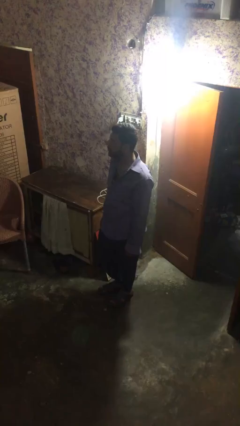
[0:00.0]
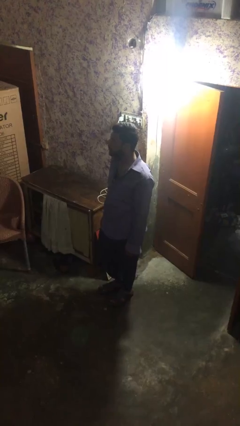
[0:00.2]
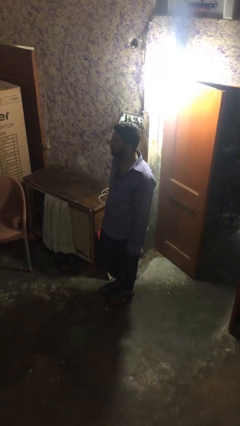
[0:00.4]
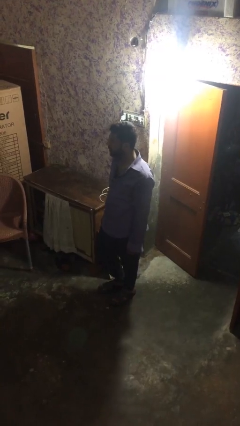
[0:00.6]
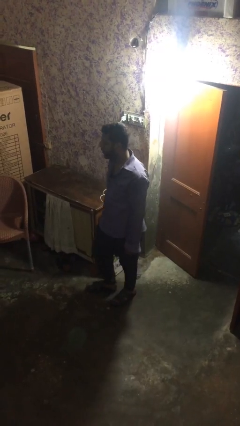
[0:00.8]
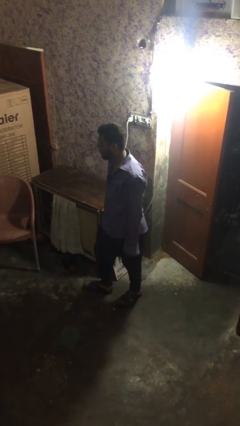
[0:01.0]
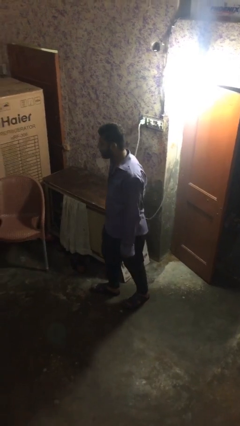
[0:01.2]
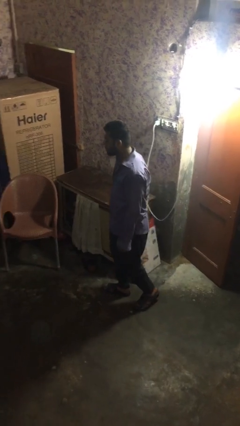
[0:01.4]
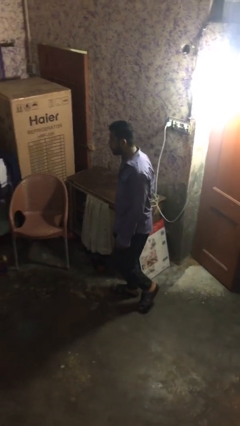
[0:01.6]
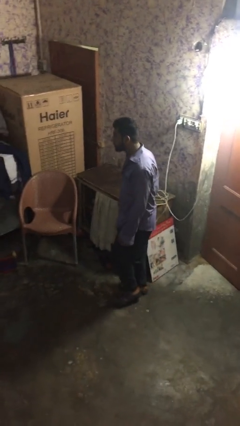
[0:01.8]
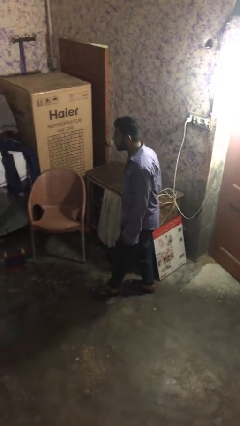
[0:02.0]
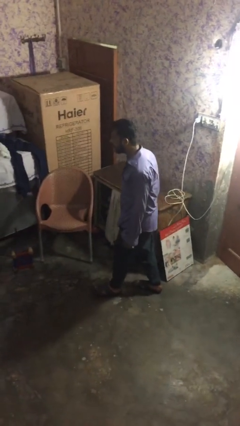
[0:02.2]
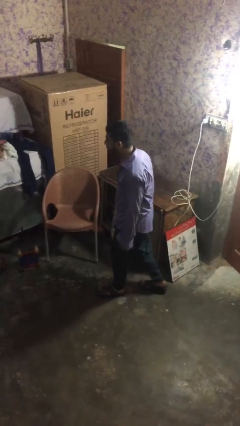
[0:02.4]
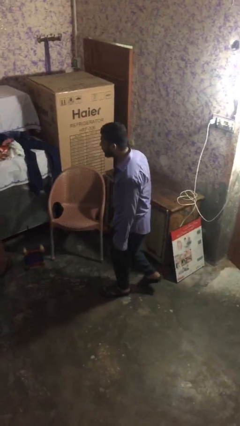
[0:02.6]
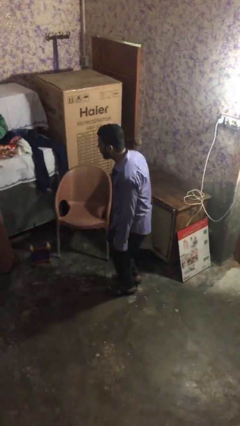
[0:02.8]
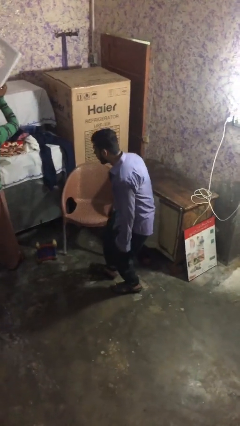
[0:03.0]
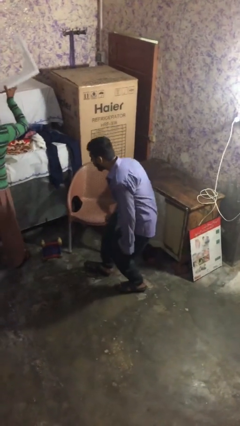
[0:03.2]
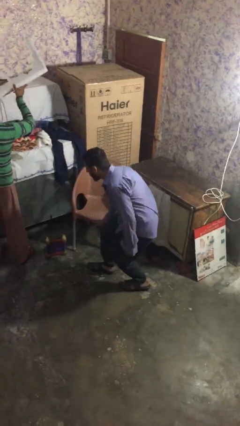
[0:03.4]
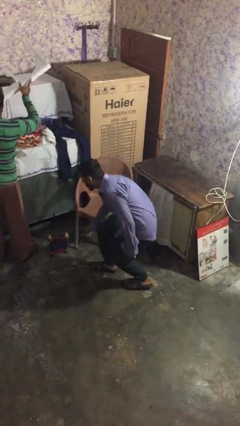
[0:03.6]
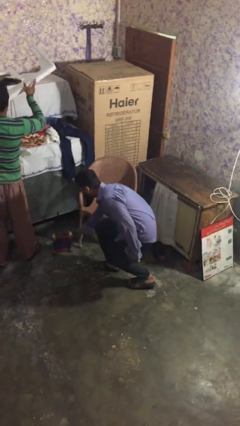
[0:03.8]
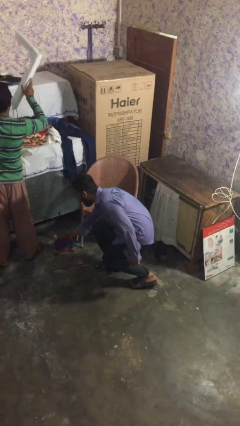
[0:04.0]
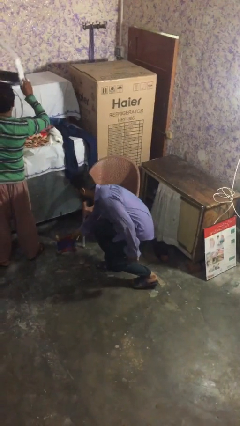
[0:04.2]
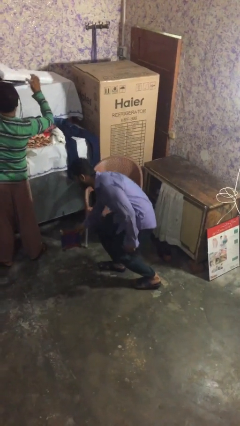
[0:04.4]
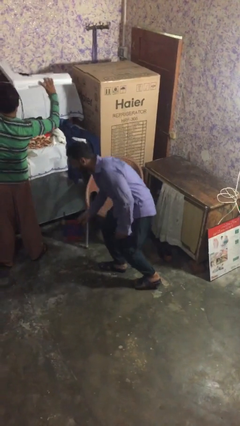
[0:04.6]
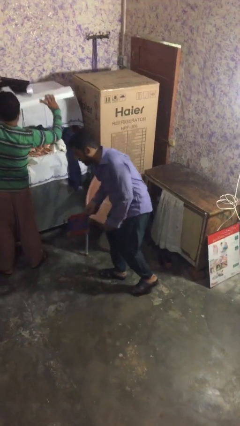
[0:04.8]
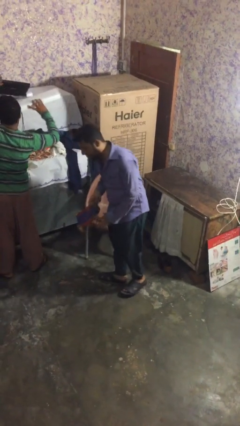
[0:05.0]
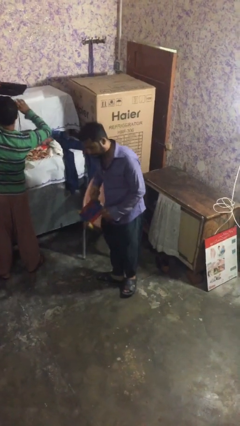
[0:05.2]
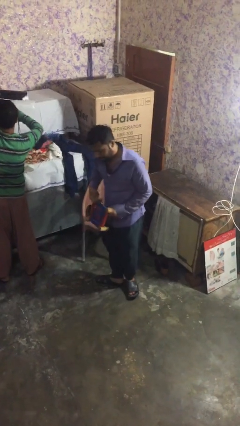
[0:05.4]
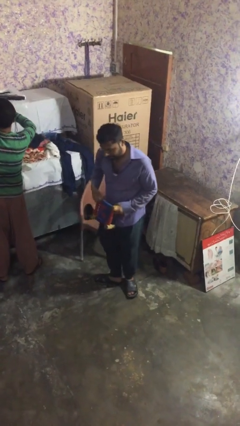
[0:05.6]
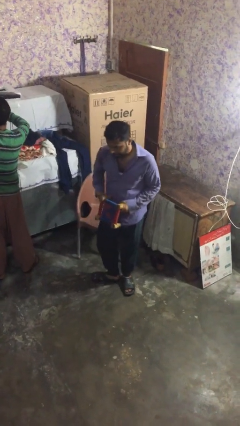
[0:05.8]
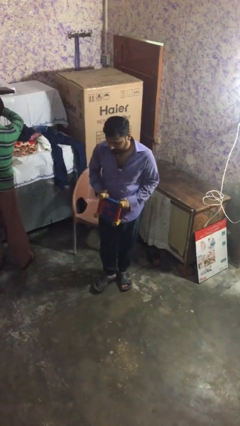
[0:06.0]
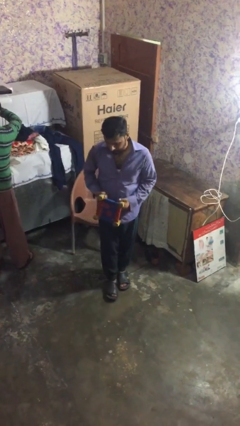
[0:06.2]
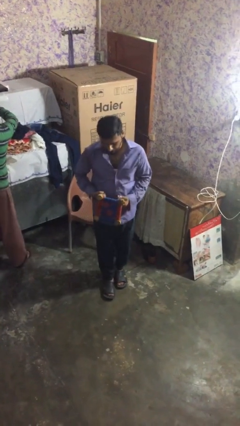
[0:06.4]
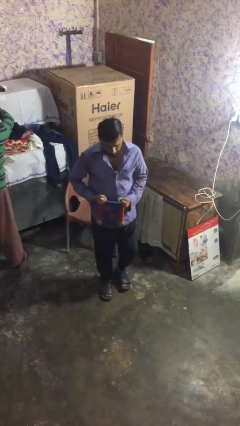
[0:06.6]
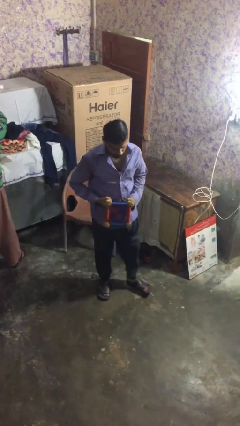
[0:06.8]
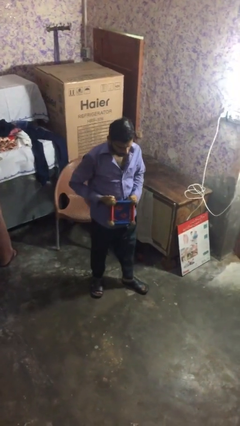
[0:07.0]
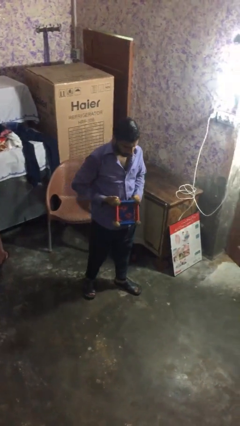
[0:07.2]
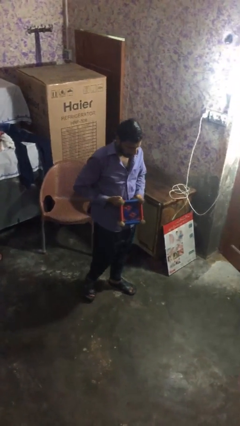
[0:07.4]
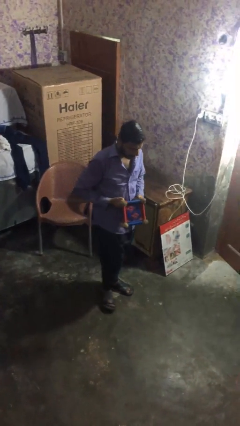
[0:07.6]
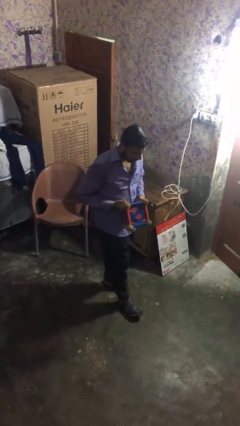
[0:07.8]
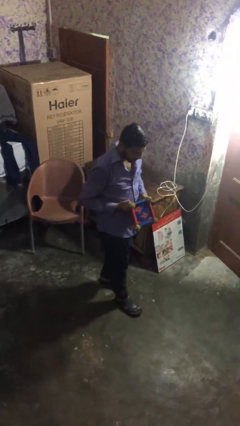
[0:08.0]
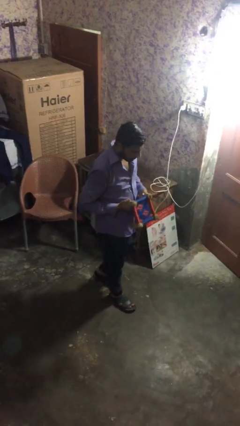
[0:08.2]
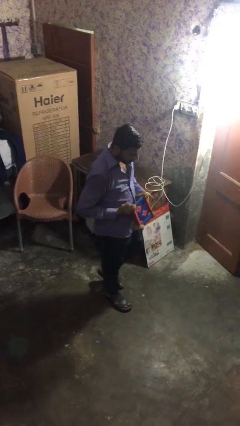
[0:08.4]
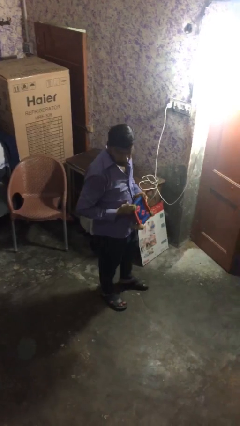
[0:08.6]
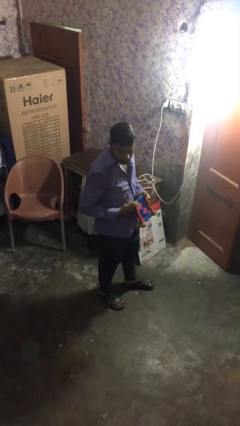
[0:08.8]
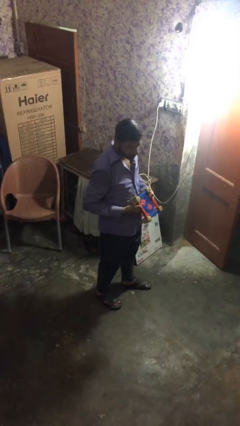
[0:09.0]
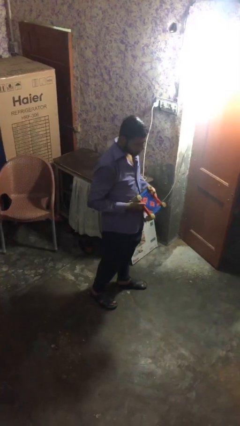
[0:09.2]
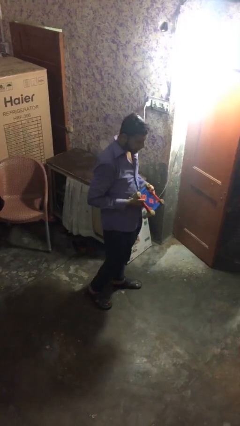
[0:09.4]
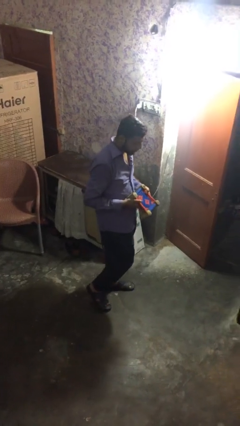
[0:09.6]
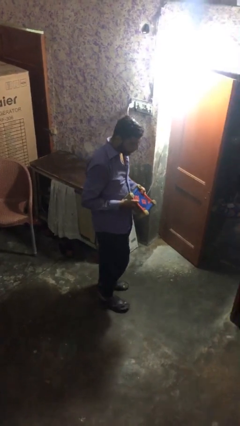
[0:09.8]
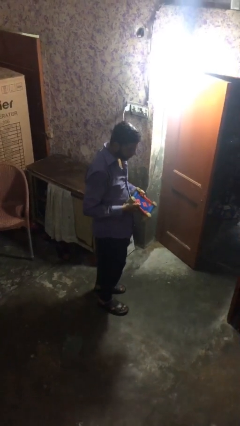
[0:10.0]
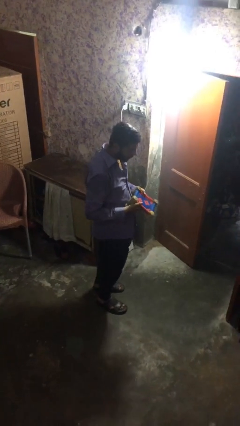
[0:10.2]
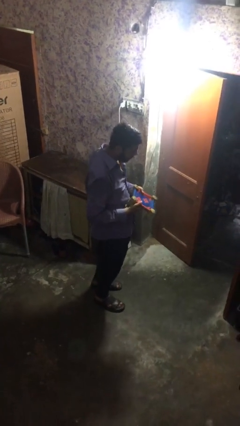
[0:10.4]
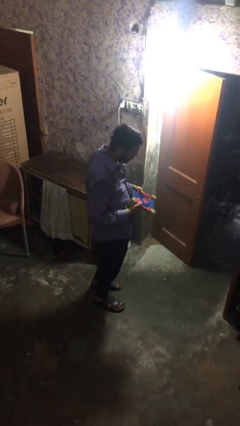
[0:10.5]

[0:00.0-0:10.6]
person steals object from person

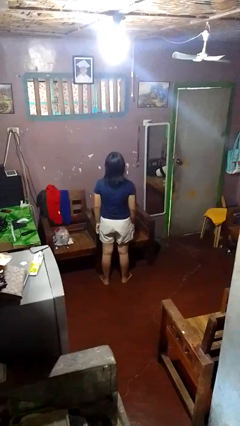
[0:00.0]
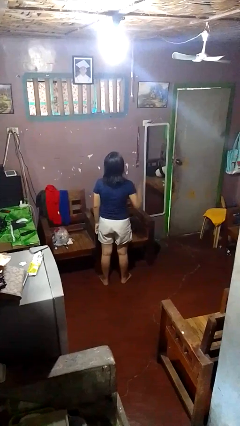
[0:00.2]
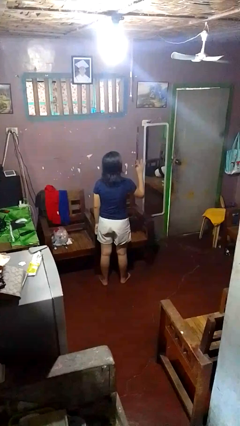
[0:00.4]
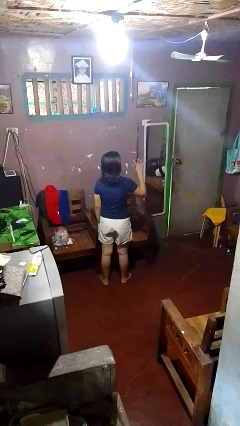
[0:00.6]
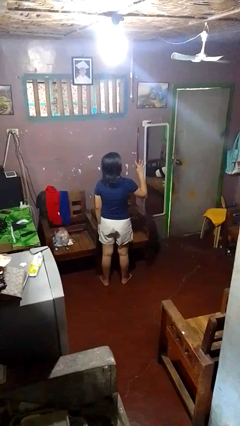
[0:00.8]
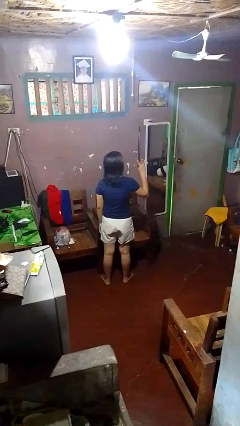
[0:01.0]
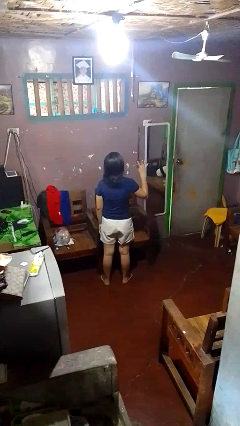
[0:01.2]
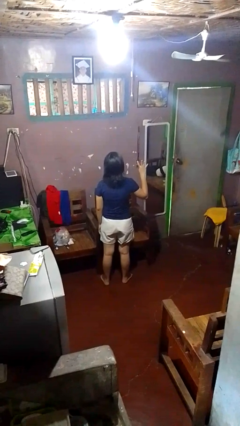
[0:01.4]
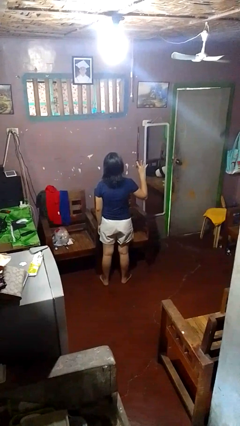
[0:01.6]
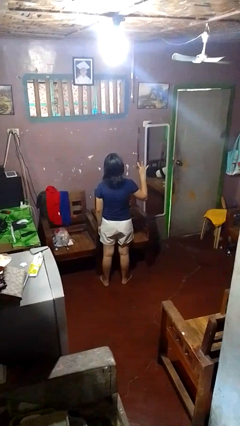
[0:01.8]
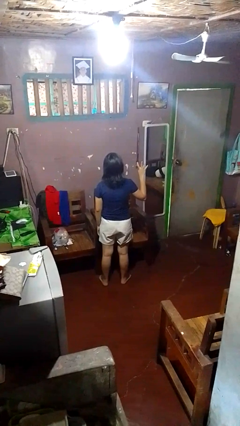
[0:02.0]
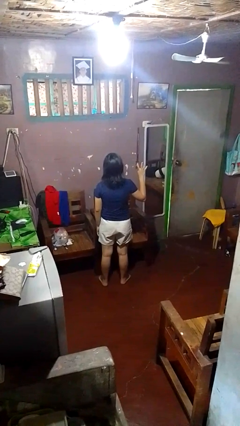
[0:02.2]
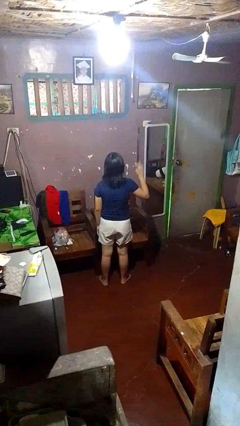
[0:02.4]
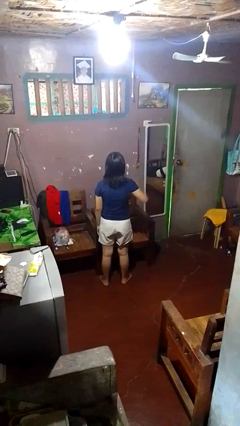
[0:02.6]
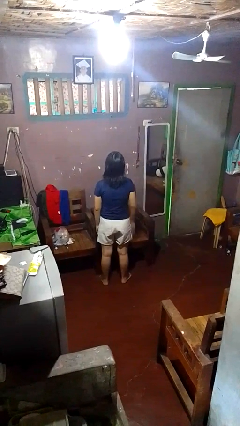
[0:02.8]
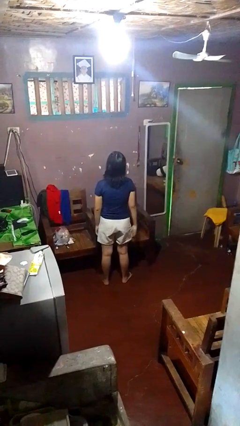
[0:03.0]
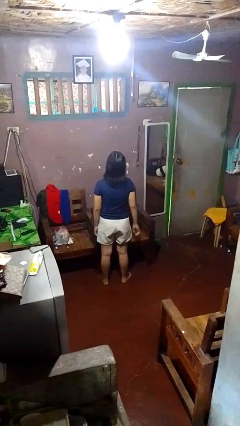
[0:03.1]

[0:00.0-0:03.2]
person gestures number four

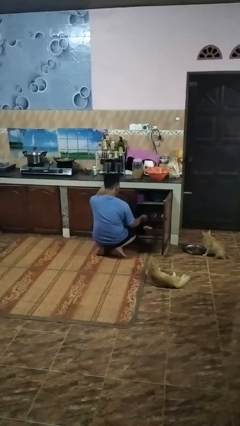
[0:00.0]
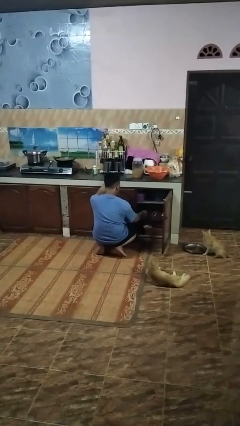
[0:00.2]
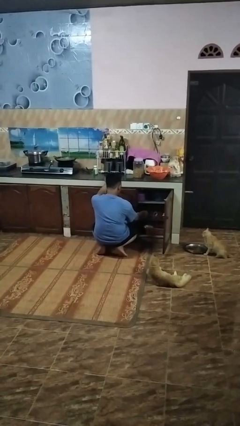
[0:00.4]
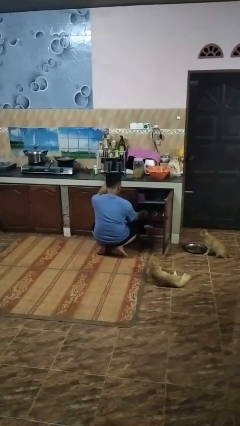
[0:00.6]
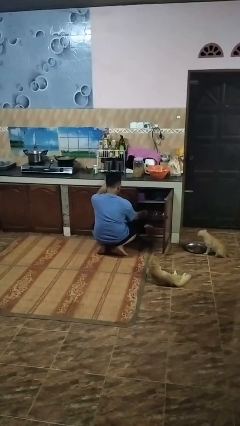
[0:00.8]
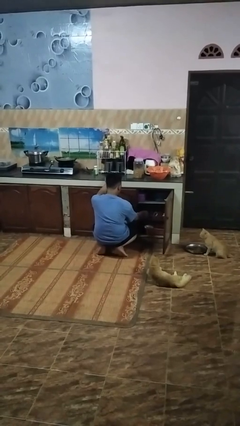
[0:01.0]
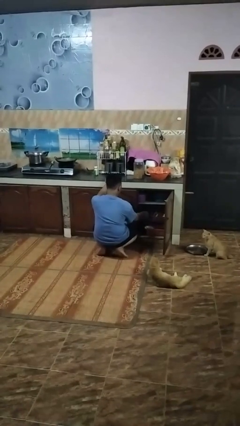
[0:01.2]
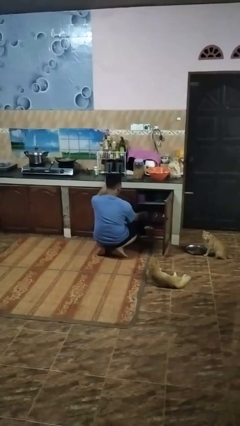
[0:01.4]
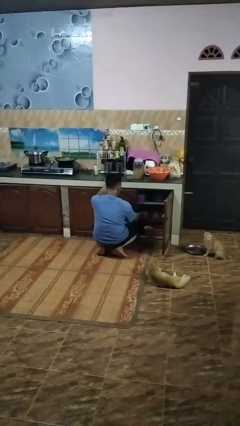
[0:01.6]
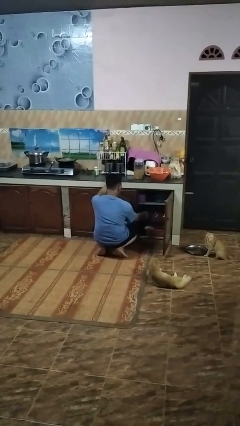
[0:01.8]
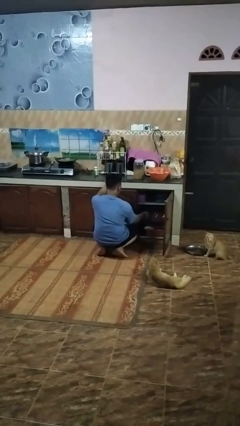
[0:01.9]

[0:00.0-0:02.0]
person puts object into kitchen drawer

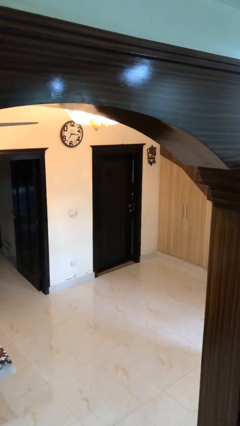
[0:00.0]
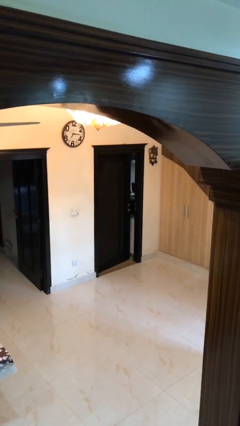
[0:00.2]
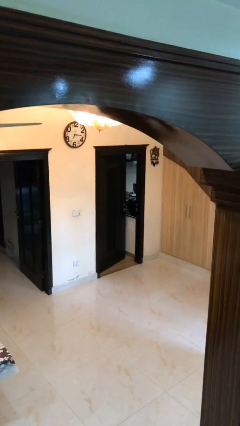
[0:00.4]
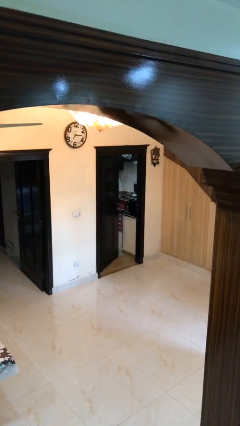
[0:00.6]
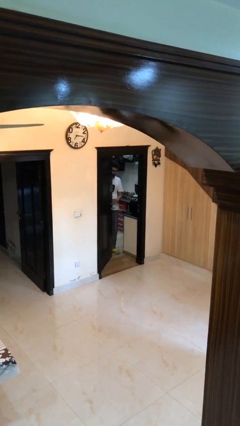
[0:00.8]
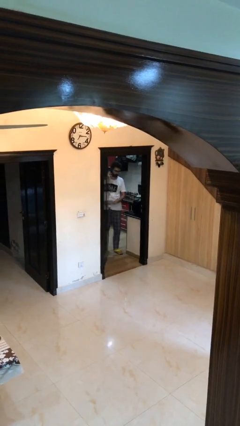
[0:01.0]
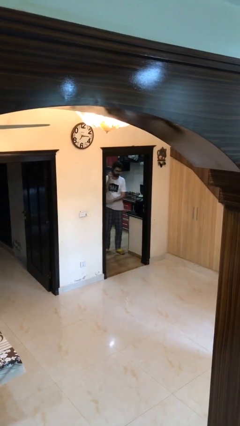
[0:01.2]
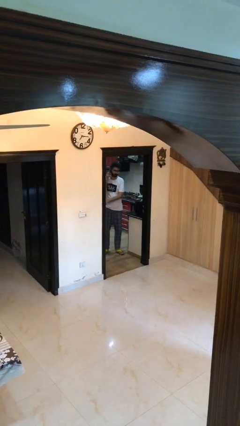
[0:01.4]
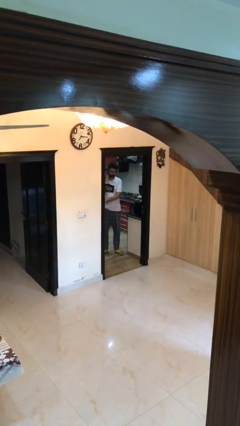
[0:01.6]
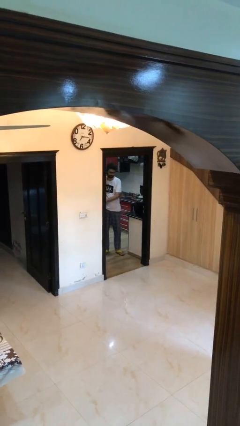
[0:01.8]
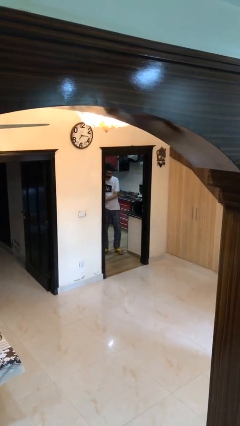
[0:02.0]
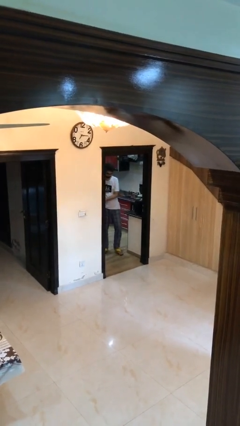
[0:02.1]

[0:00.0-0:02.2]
person opens facility door
